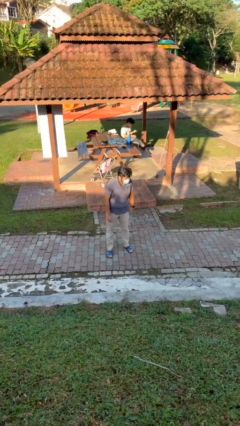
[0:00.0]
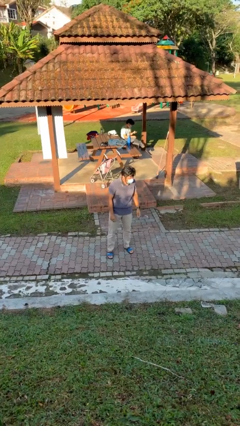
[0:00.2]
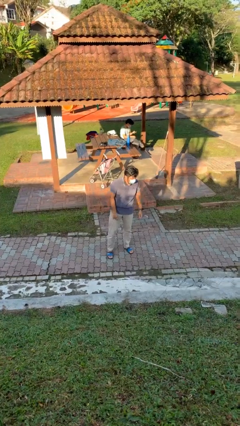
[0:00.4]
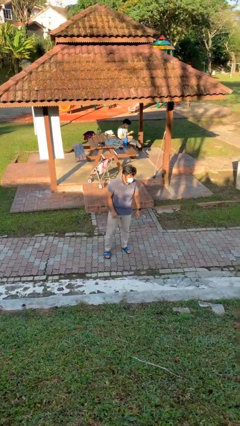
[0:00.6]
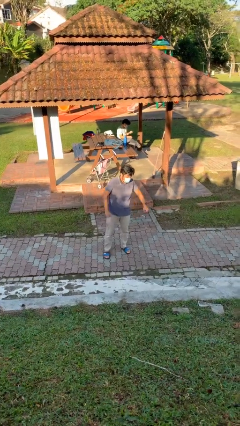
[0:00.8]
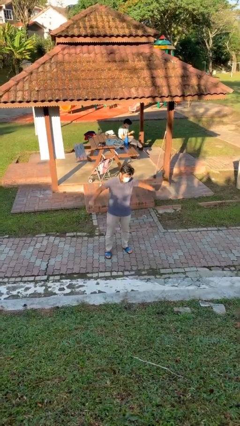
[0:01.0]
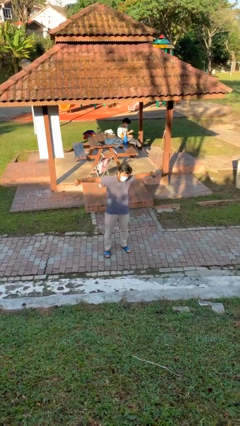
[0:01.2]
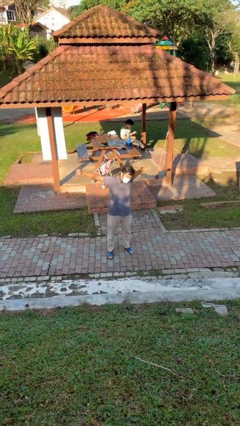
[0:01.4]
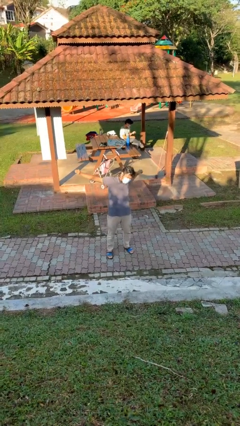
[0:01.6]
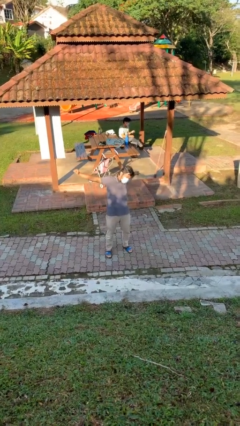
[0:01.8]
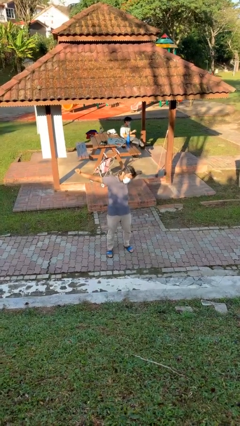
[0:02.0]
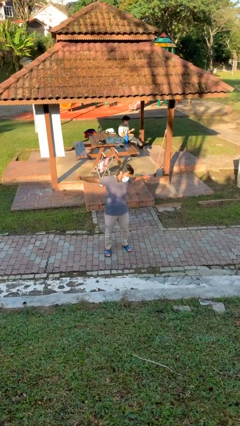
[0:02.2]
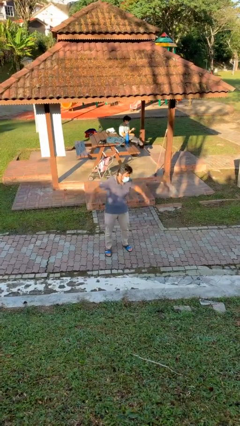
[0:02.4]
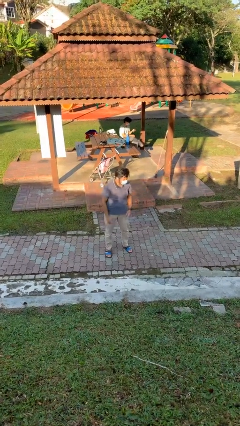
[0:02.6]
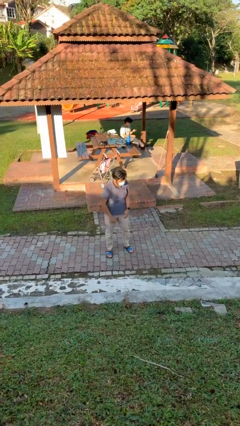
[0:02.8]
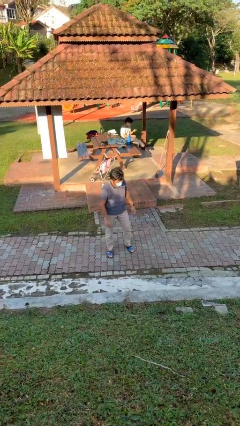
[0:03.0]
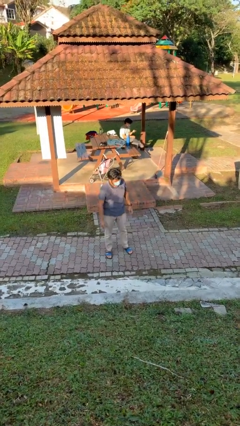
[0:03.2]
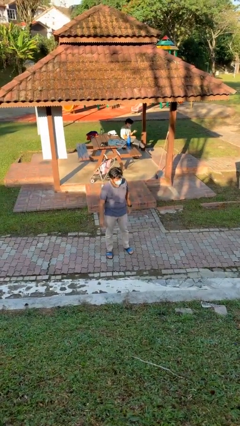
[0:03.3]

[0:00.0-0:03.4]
person stretches arms to side

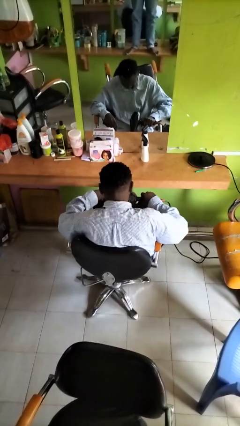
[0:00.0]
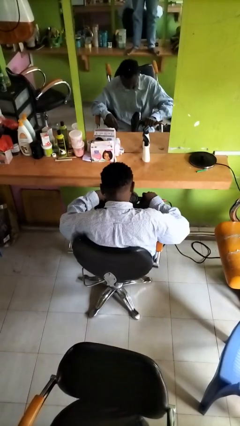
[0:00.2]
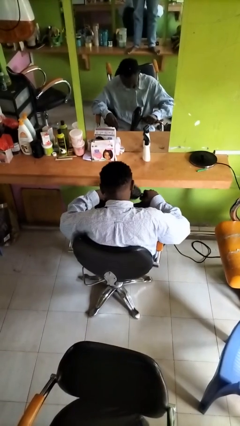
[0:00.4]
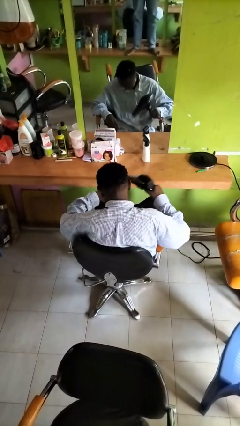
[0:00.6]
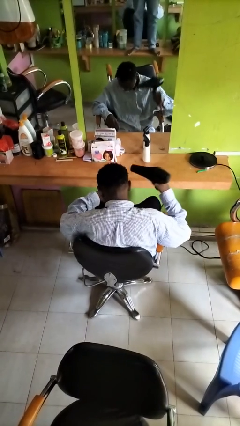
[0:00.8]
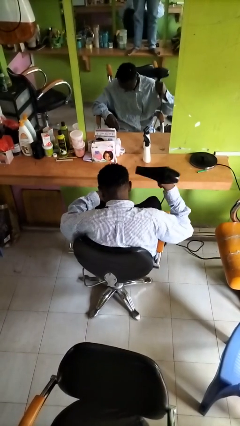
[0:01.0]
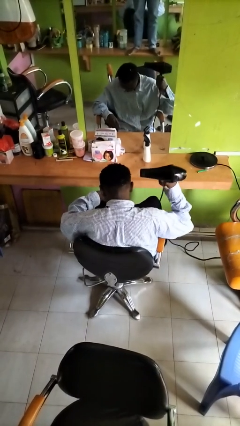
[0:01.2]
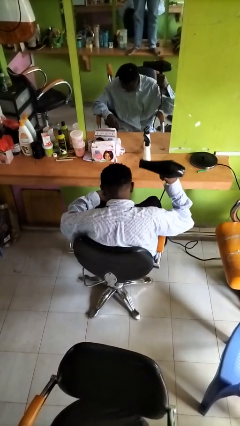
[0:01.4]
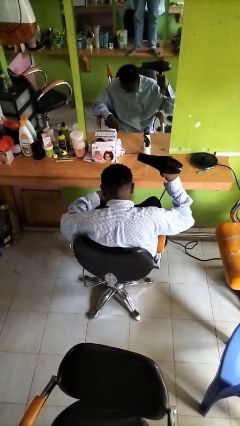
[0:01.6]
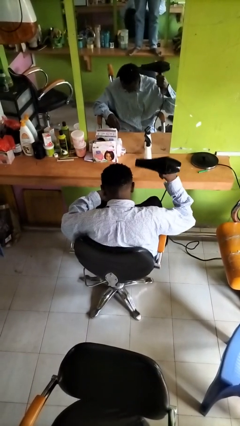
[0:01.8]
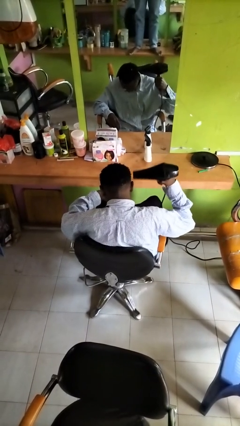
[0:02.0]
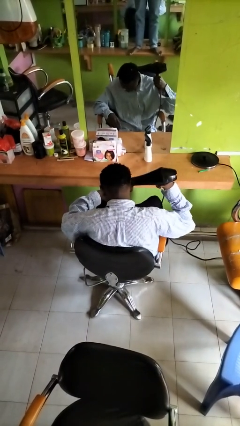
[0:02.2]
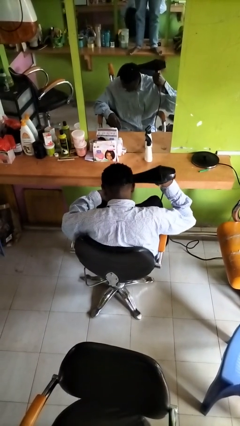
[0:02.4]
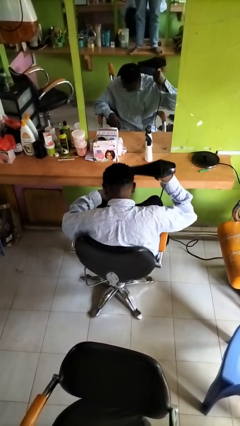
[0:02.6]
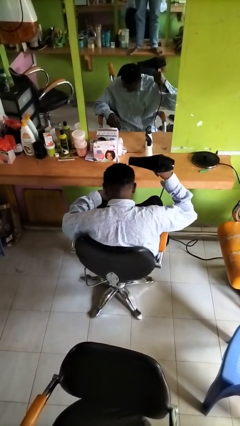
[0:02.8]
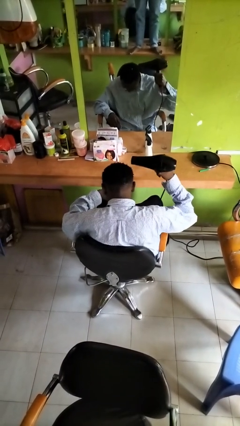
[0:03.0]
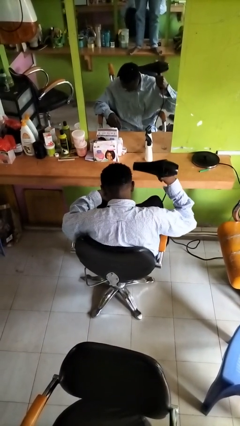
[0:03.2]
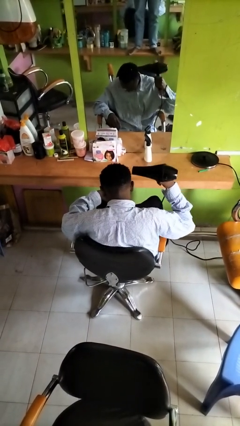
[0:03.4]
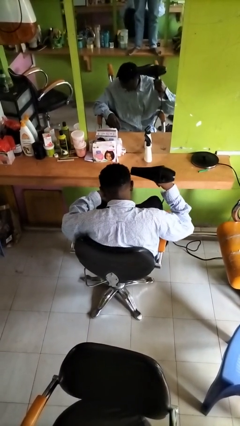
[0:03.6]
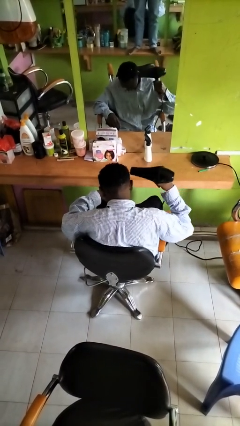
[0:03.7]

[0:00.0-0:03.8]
person dries hair with hairdryer

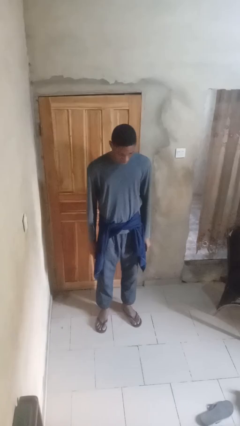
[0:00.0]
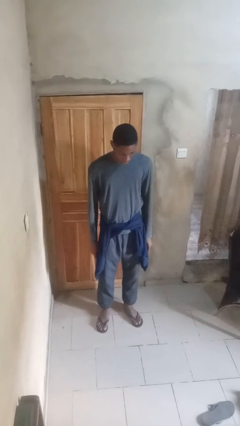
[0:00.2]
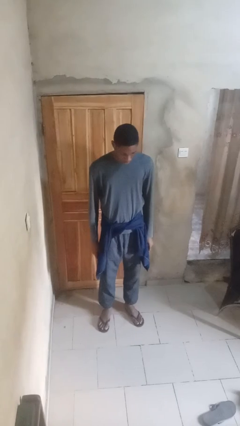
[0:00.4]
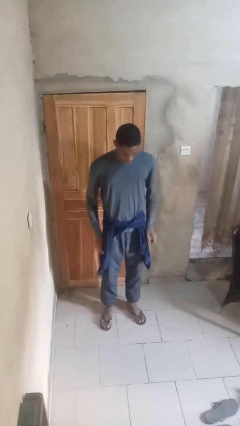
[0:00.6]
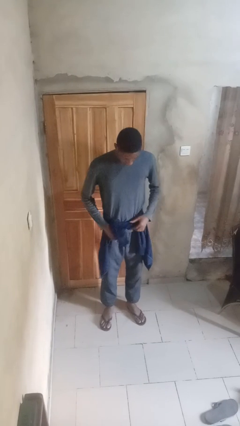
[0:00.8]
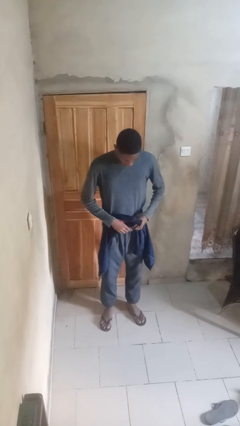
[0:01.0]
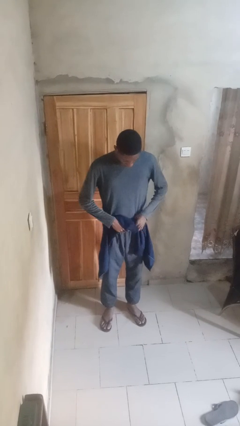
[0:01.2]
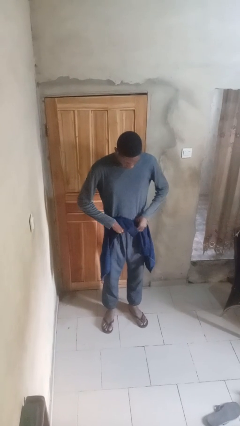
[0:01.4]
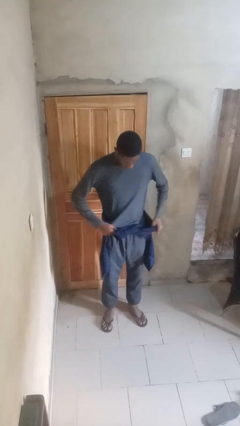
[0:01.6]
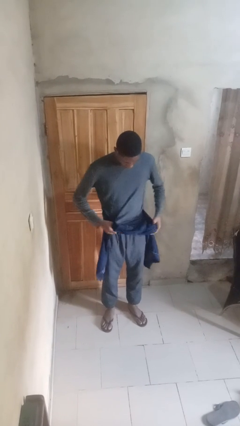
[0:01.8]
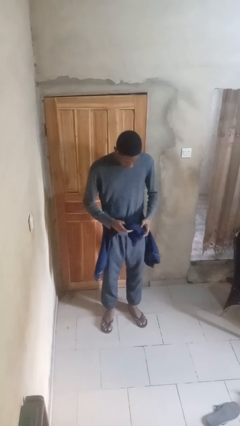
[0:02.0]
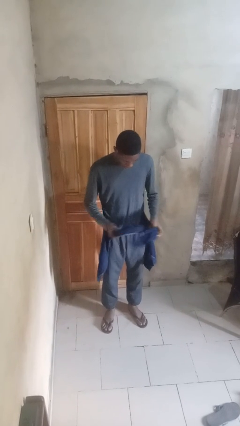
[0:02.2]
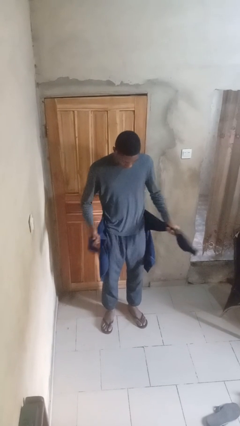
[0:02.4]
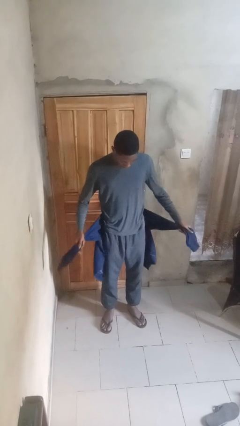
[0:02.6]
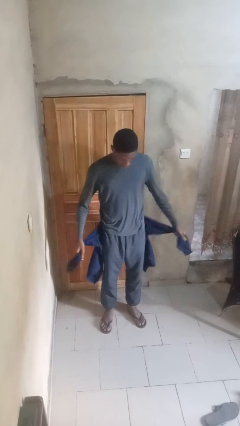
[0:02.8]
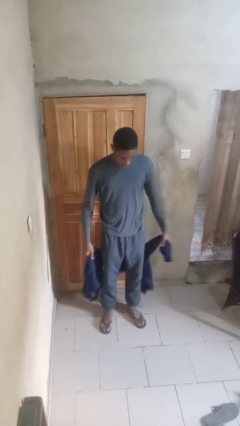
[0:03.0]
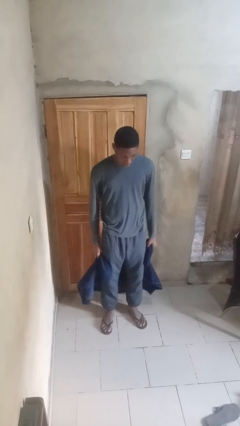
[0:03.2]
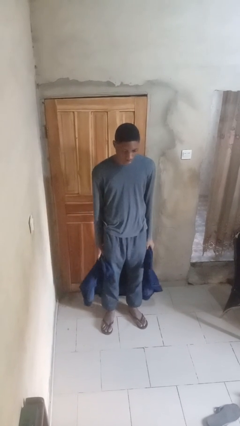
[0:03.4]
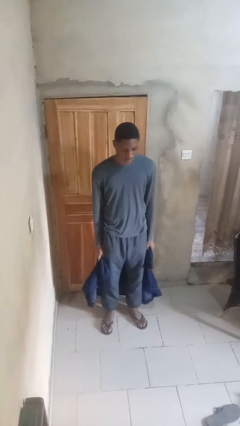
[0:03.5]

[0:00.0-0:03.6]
person unties jacket around waist

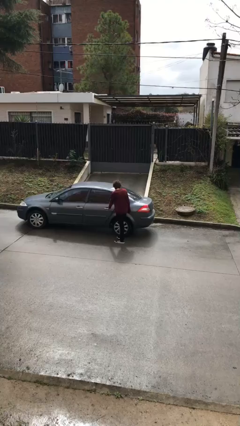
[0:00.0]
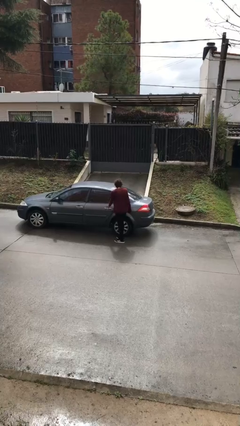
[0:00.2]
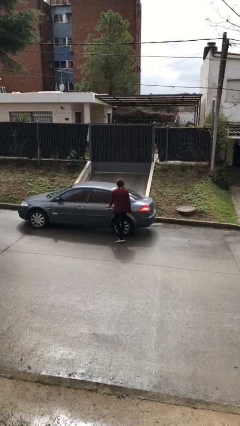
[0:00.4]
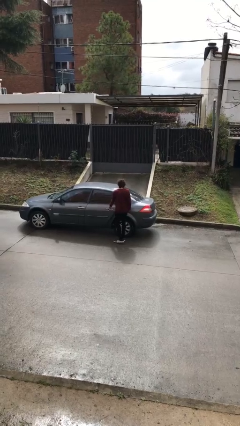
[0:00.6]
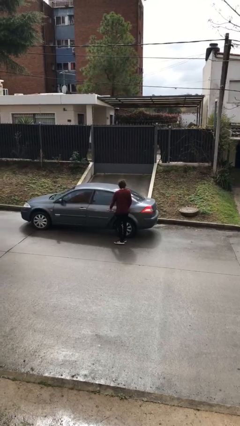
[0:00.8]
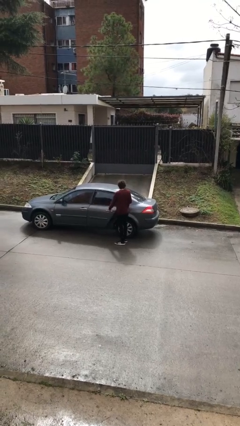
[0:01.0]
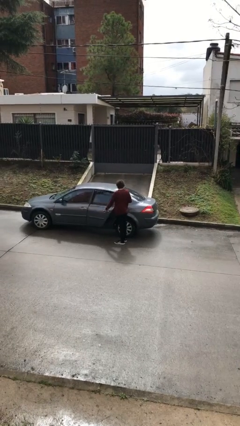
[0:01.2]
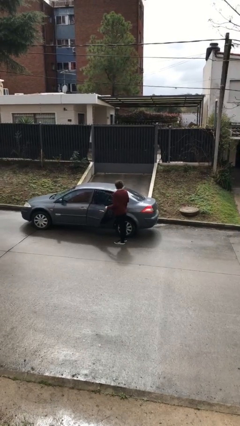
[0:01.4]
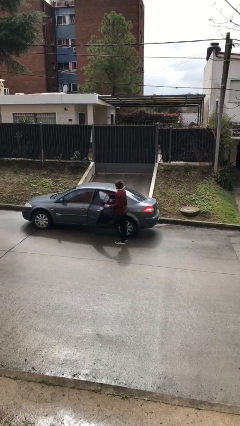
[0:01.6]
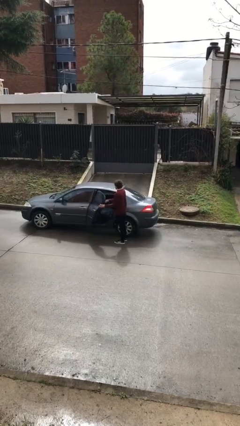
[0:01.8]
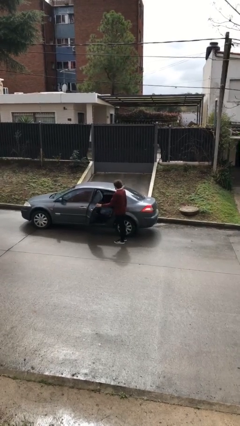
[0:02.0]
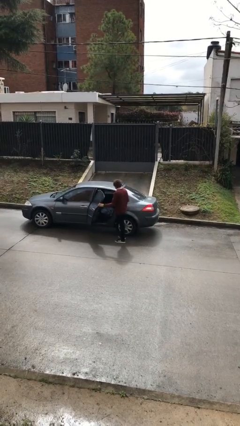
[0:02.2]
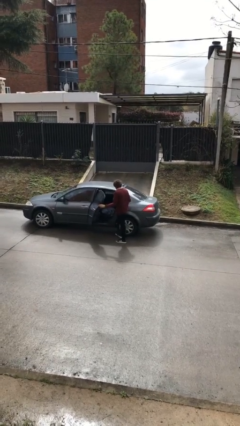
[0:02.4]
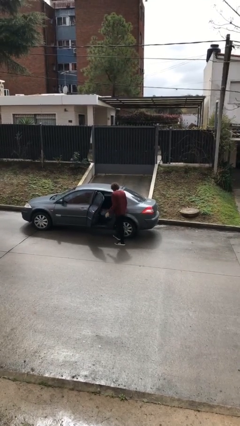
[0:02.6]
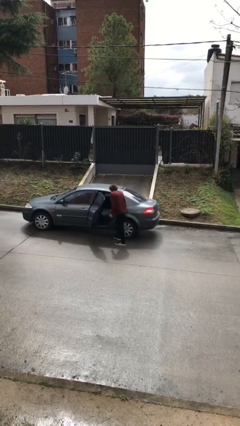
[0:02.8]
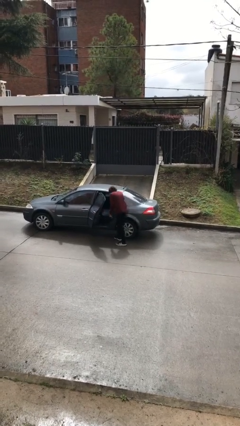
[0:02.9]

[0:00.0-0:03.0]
person opens car door

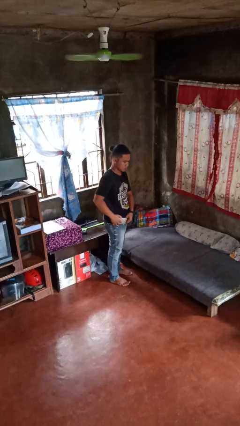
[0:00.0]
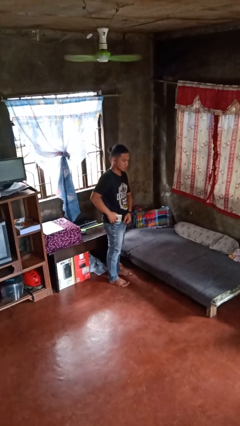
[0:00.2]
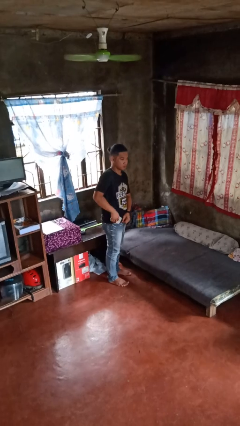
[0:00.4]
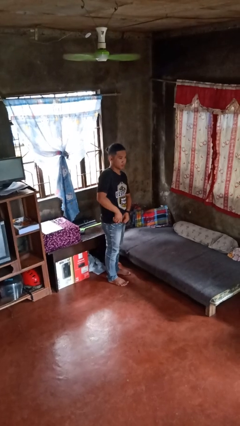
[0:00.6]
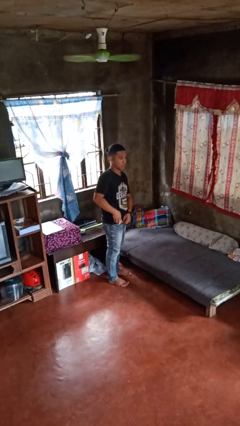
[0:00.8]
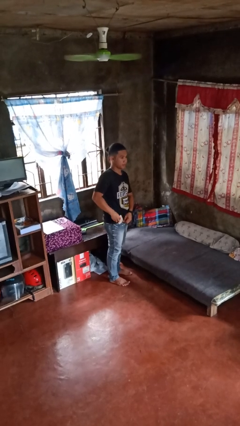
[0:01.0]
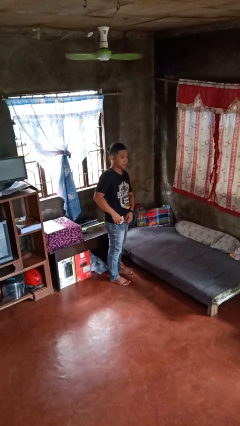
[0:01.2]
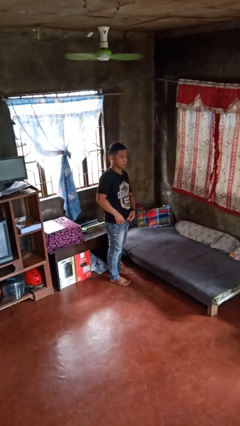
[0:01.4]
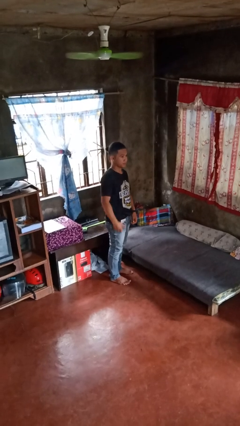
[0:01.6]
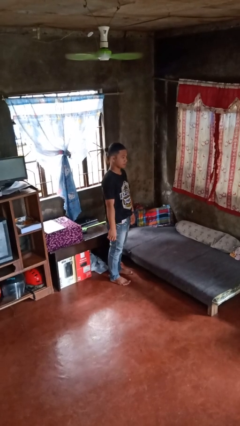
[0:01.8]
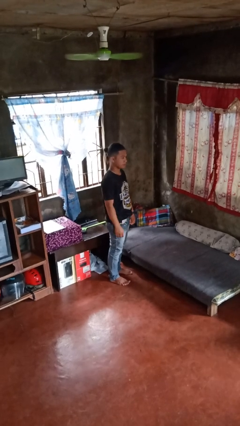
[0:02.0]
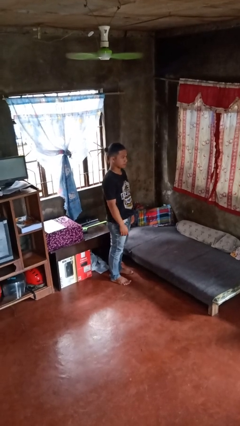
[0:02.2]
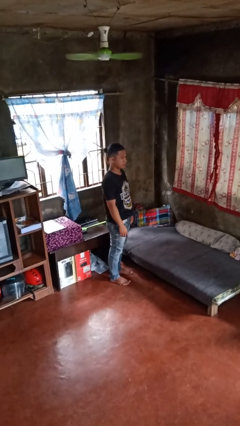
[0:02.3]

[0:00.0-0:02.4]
person puts phone into pocket

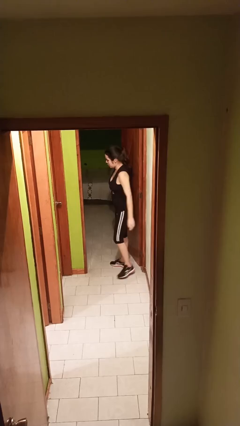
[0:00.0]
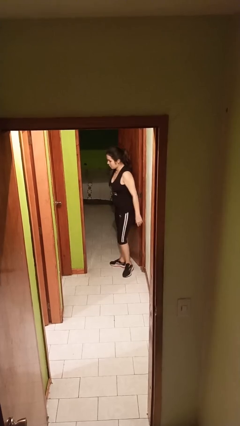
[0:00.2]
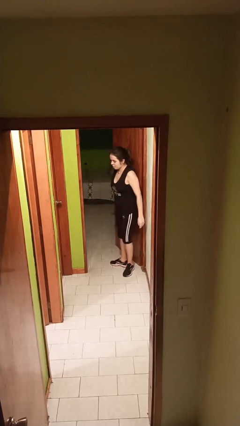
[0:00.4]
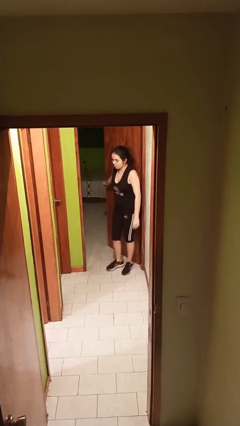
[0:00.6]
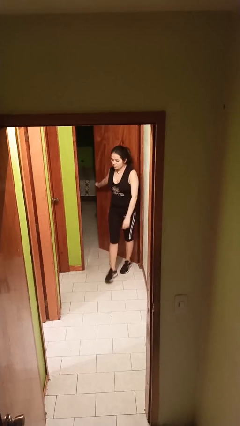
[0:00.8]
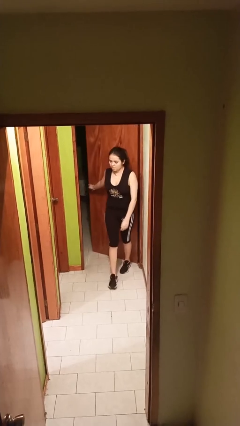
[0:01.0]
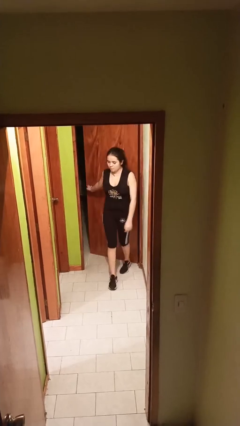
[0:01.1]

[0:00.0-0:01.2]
person closes facility door
